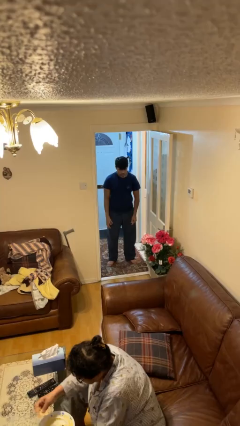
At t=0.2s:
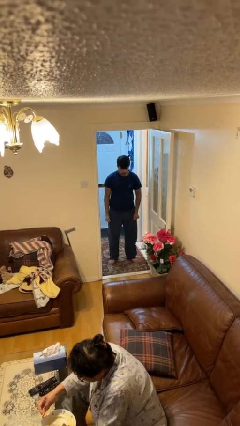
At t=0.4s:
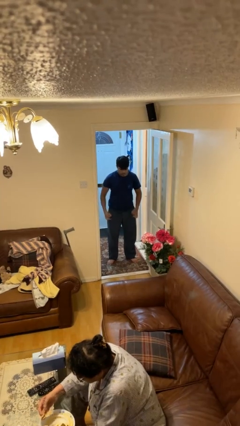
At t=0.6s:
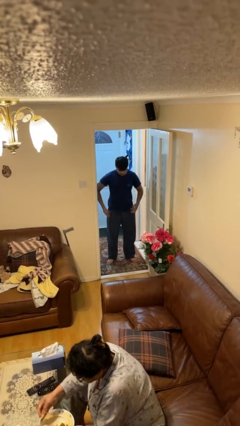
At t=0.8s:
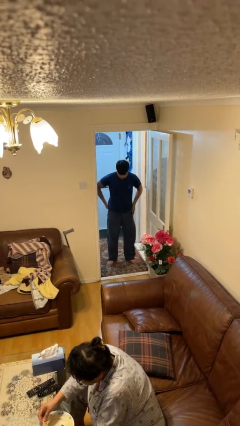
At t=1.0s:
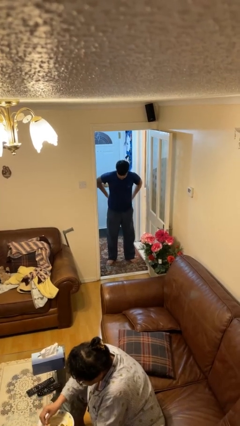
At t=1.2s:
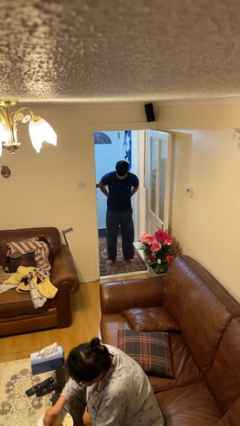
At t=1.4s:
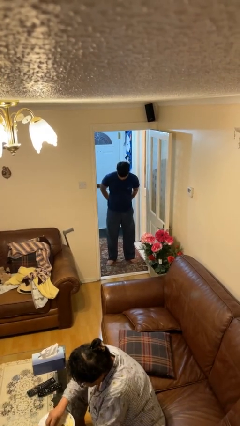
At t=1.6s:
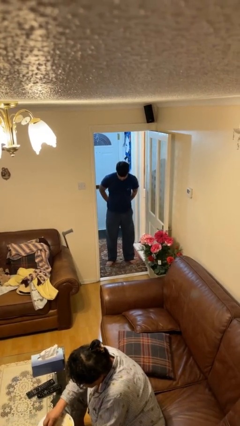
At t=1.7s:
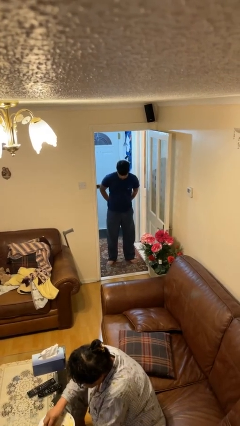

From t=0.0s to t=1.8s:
person puts hands in back pockets

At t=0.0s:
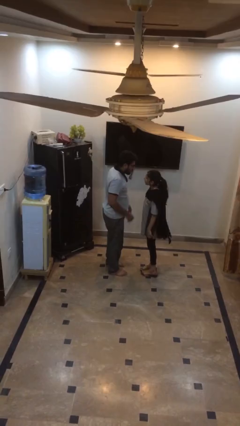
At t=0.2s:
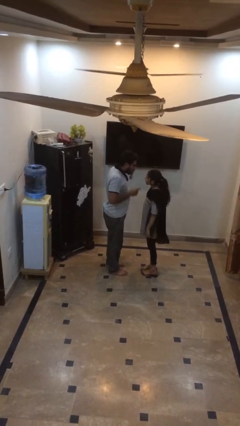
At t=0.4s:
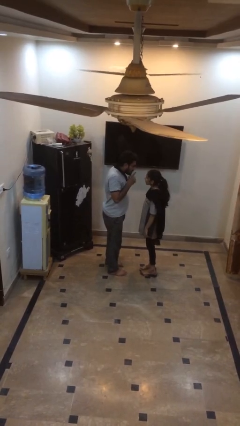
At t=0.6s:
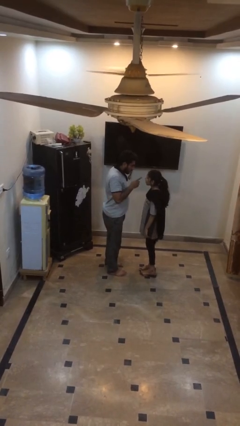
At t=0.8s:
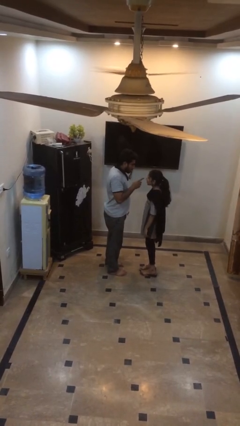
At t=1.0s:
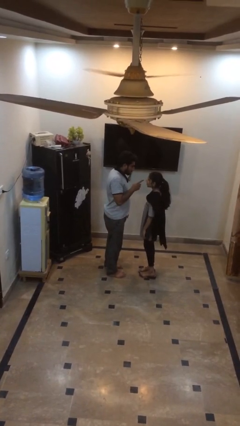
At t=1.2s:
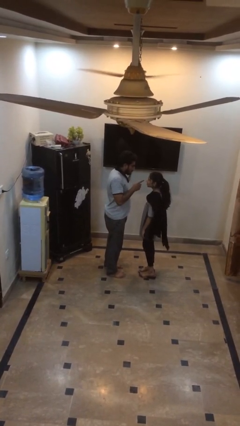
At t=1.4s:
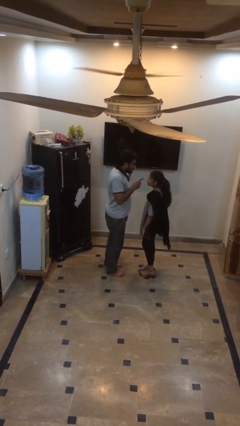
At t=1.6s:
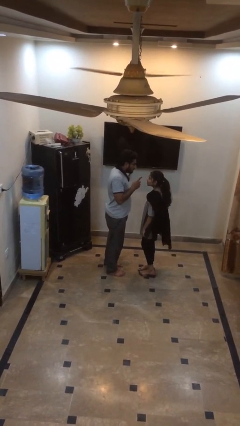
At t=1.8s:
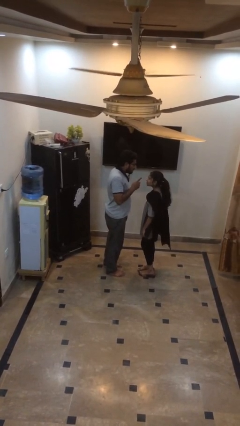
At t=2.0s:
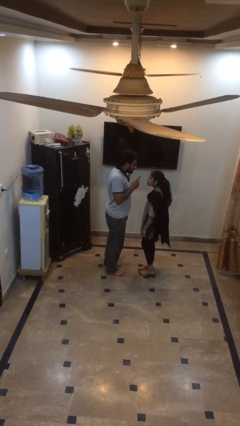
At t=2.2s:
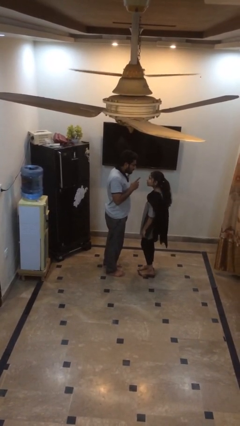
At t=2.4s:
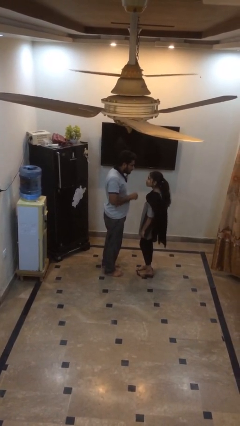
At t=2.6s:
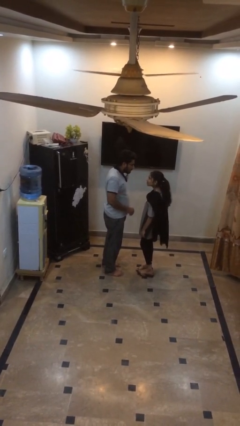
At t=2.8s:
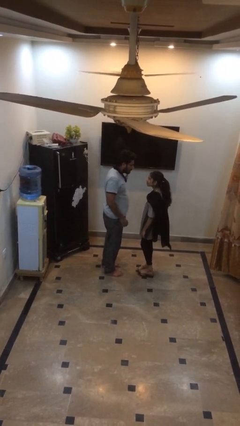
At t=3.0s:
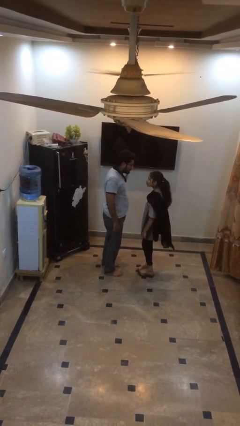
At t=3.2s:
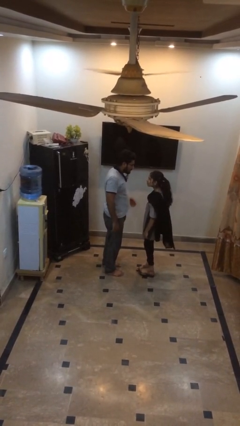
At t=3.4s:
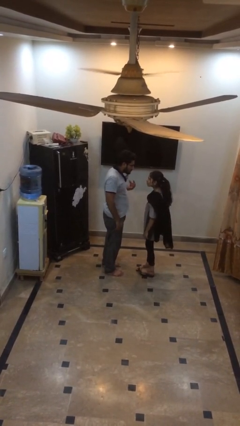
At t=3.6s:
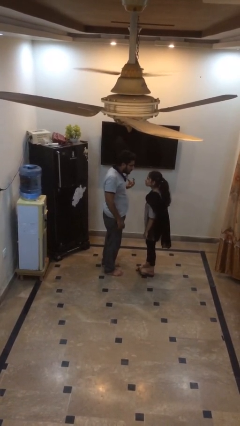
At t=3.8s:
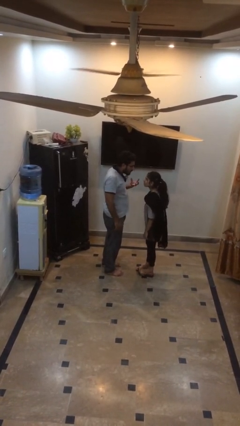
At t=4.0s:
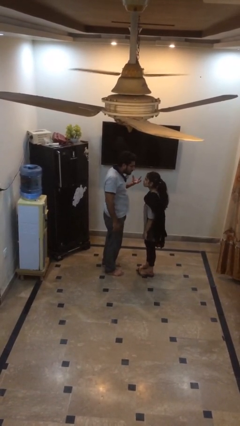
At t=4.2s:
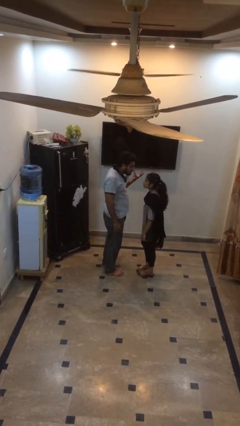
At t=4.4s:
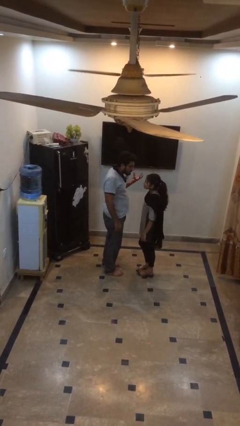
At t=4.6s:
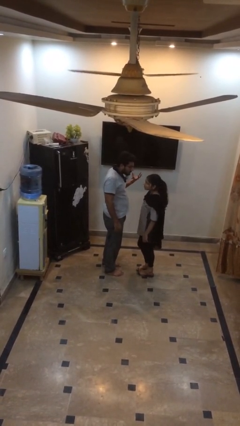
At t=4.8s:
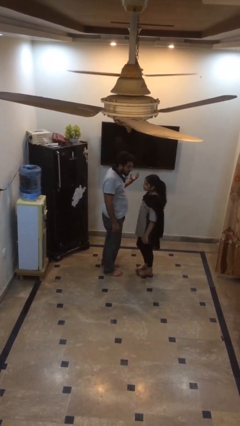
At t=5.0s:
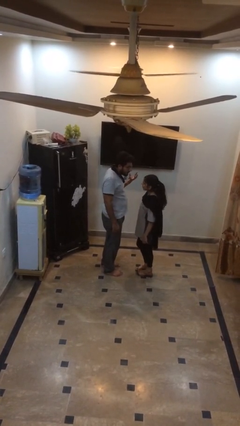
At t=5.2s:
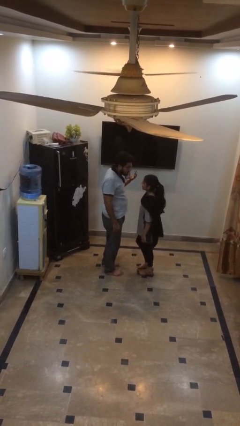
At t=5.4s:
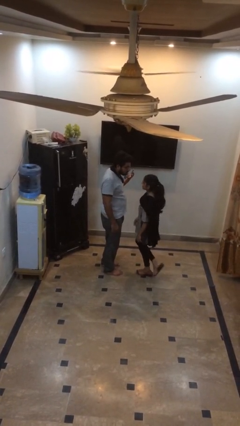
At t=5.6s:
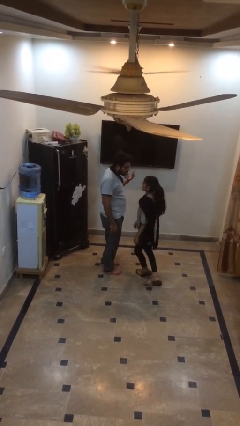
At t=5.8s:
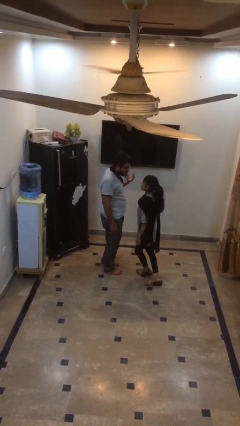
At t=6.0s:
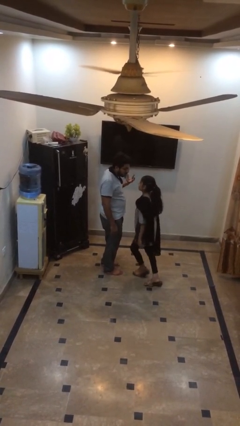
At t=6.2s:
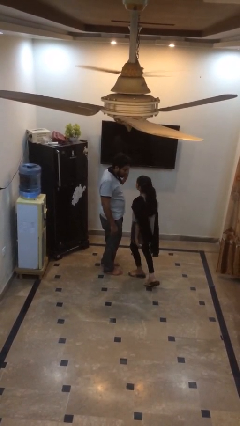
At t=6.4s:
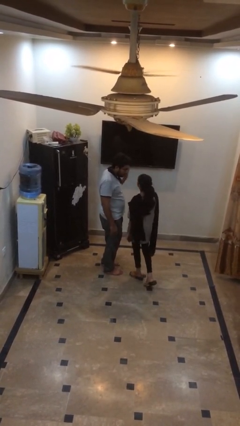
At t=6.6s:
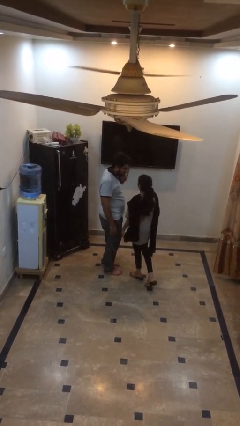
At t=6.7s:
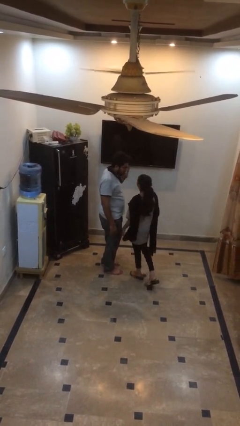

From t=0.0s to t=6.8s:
person talks to person

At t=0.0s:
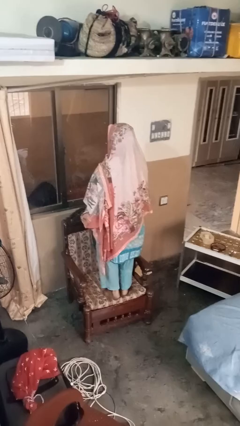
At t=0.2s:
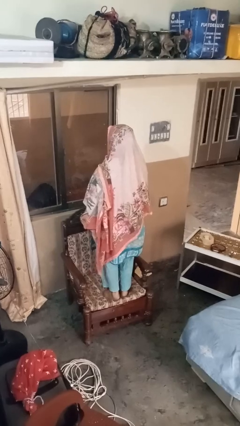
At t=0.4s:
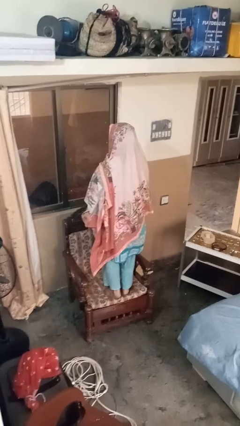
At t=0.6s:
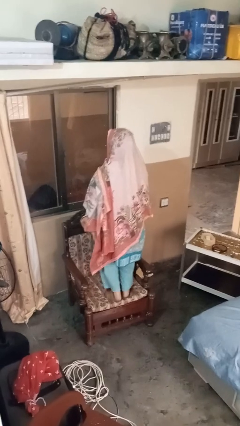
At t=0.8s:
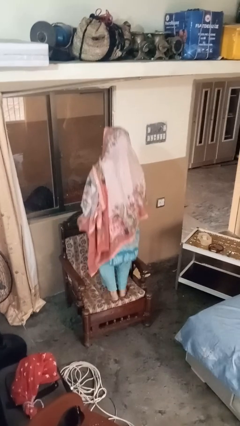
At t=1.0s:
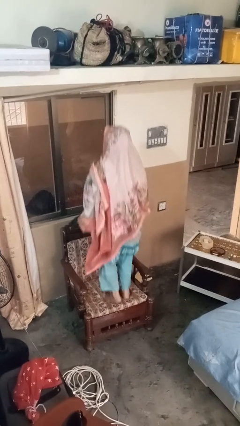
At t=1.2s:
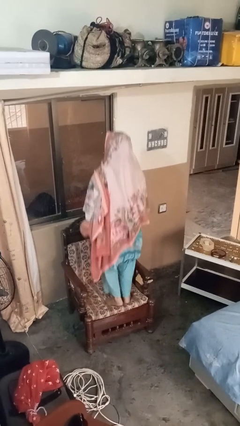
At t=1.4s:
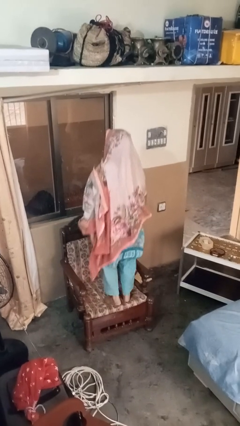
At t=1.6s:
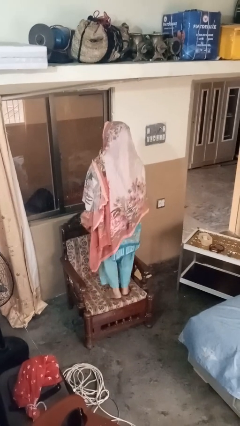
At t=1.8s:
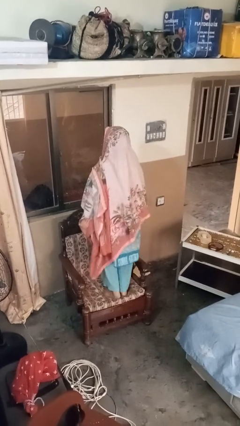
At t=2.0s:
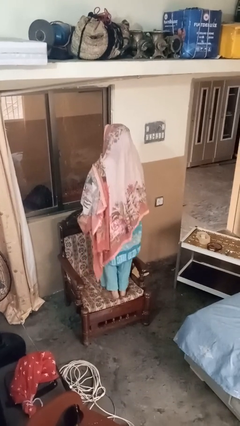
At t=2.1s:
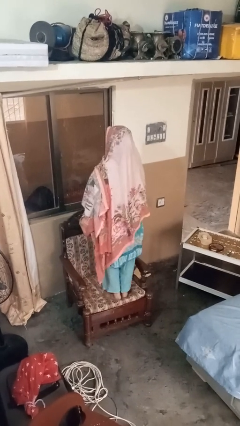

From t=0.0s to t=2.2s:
person jumps on couch

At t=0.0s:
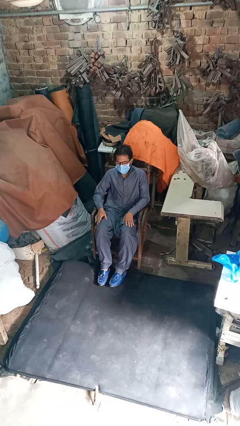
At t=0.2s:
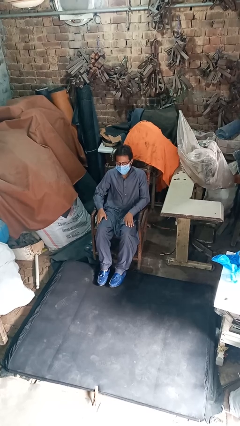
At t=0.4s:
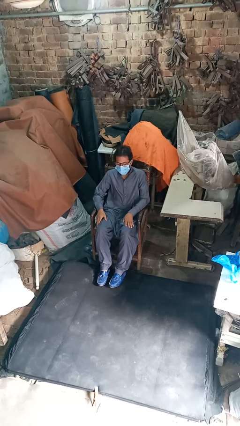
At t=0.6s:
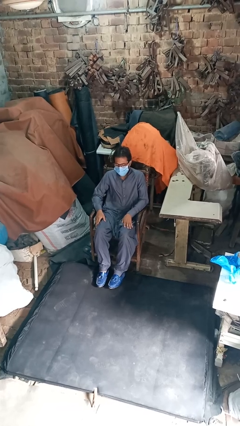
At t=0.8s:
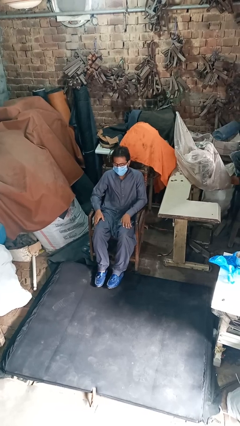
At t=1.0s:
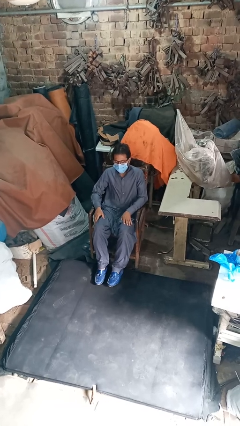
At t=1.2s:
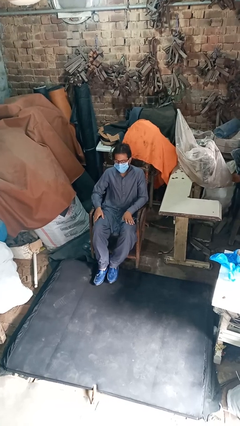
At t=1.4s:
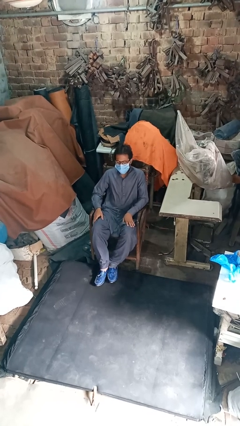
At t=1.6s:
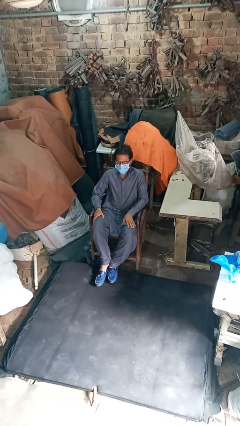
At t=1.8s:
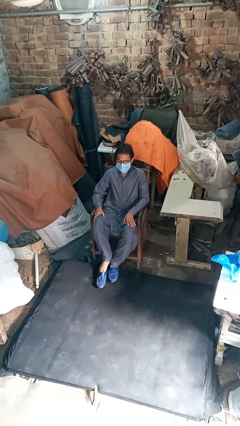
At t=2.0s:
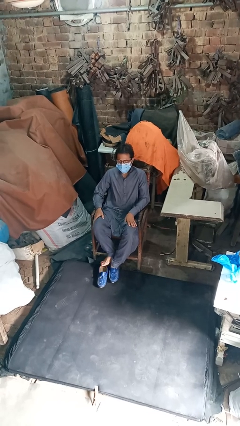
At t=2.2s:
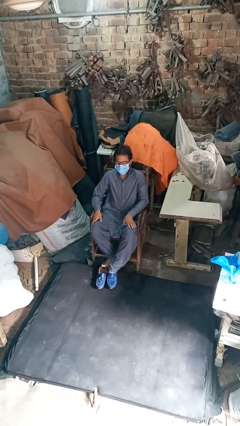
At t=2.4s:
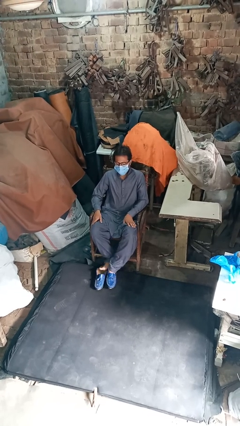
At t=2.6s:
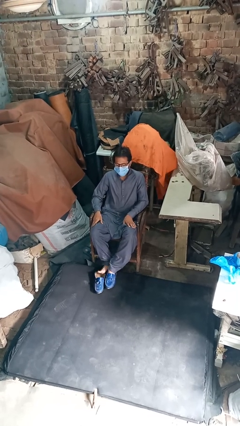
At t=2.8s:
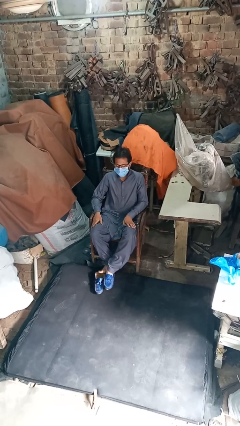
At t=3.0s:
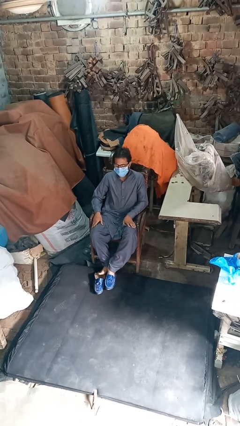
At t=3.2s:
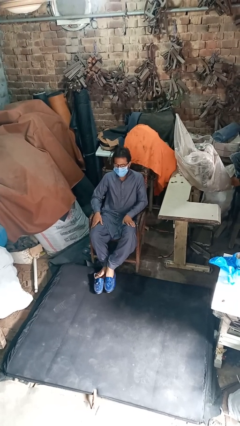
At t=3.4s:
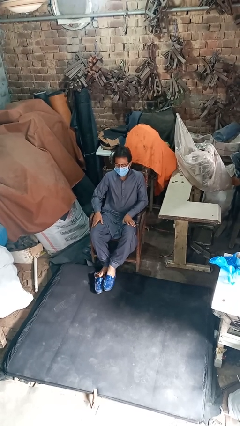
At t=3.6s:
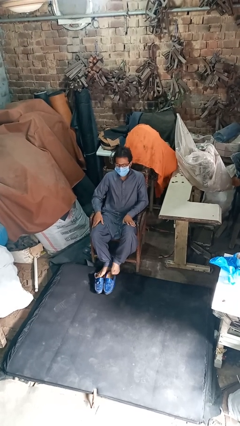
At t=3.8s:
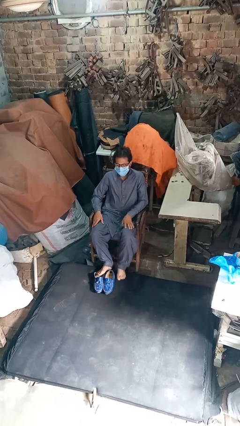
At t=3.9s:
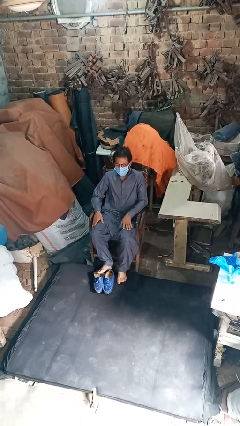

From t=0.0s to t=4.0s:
person takes off shoes

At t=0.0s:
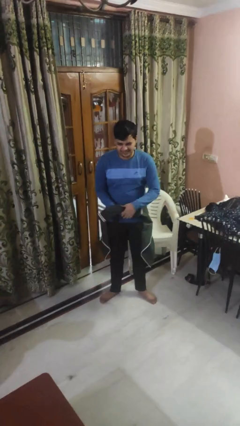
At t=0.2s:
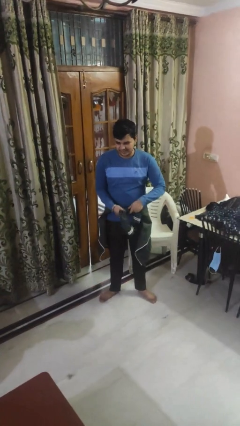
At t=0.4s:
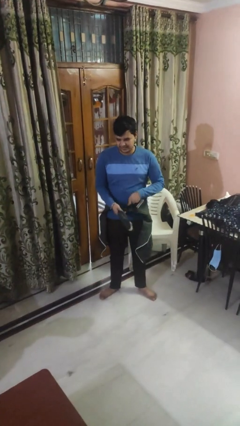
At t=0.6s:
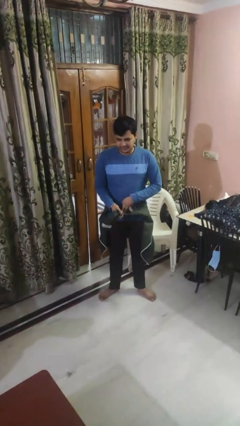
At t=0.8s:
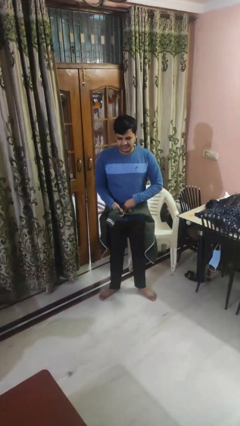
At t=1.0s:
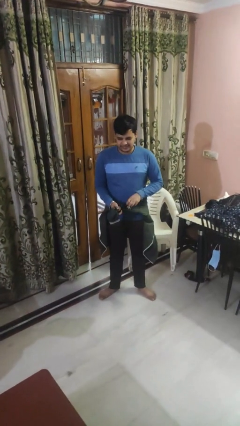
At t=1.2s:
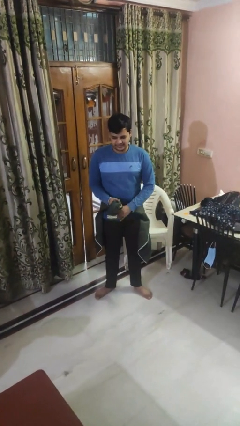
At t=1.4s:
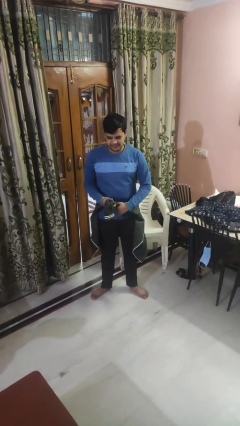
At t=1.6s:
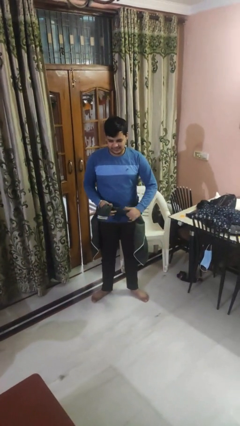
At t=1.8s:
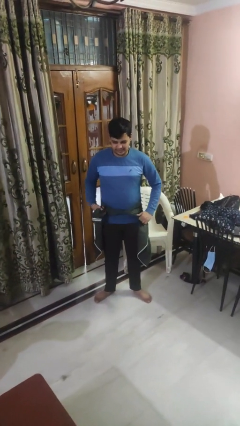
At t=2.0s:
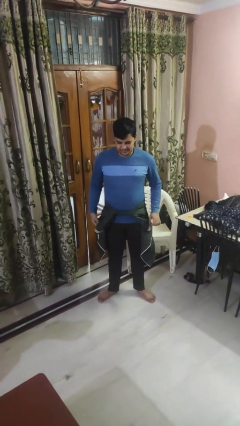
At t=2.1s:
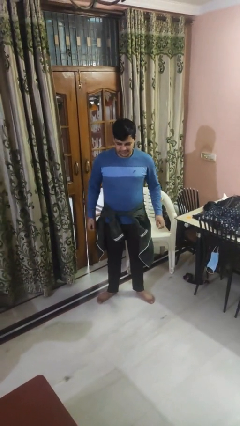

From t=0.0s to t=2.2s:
person ties jacket around waist

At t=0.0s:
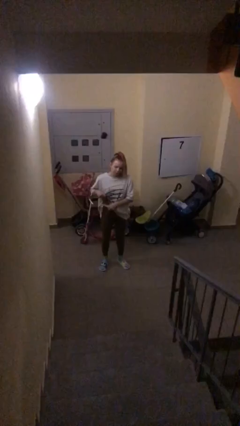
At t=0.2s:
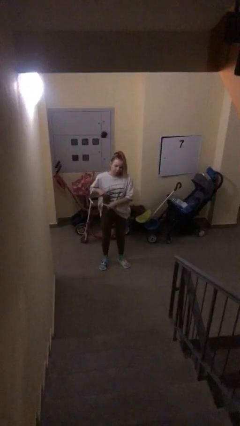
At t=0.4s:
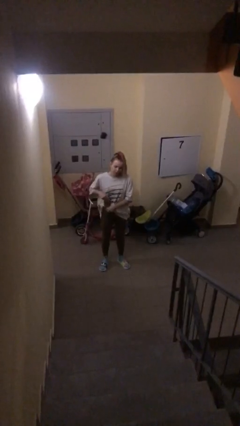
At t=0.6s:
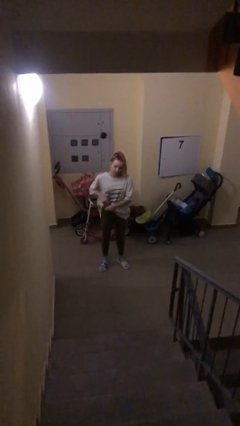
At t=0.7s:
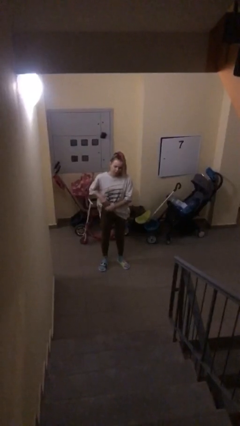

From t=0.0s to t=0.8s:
person puts phone into pocket
